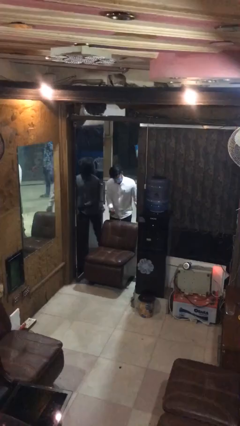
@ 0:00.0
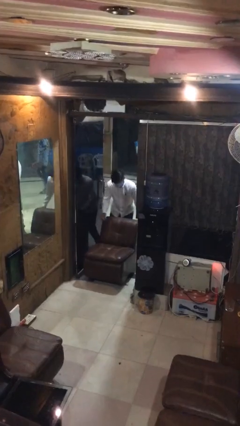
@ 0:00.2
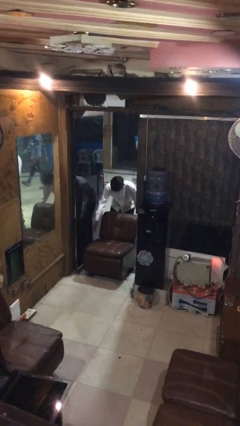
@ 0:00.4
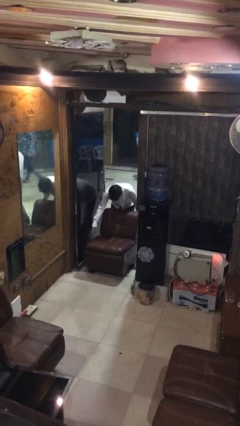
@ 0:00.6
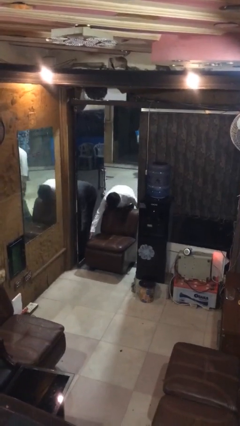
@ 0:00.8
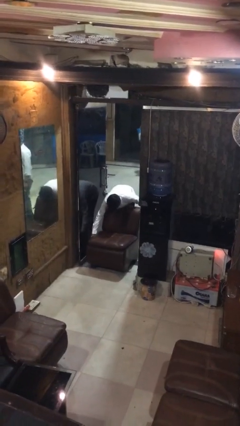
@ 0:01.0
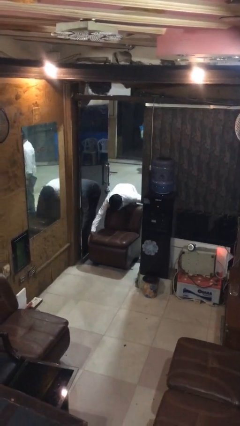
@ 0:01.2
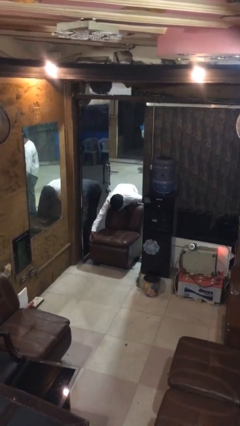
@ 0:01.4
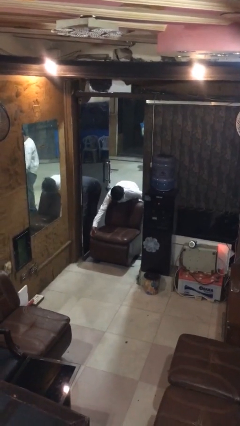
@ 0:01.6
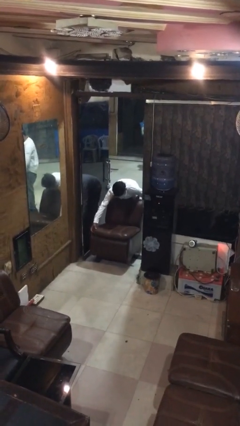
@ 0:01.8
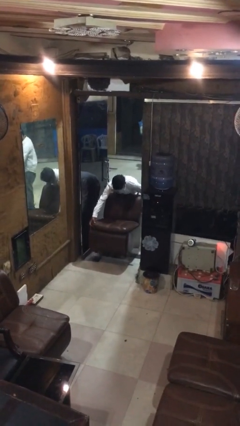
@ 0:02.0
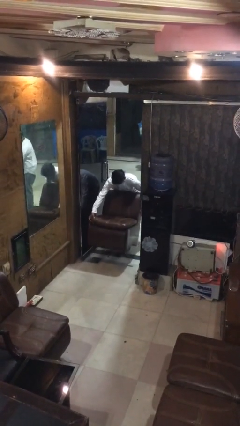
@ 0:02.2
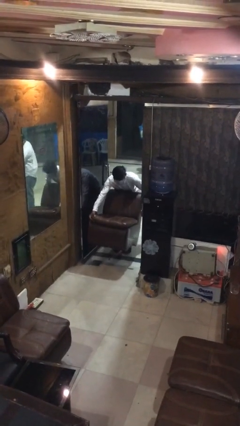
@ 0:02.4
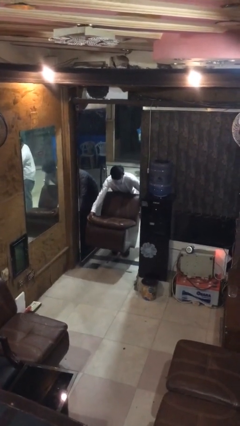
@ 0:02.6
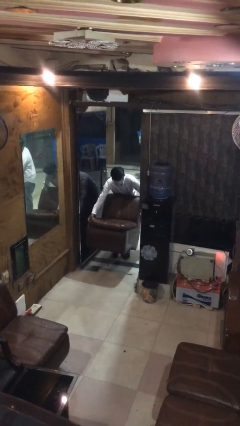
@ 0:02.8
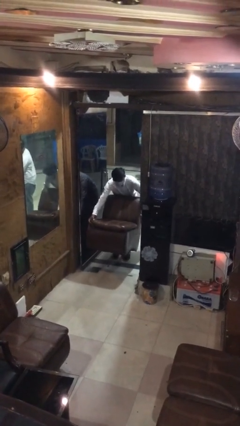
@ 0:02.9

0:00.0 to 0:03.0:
person picks up object from floor

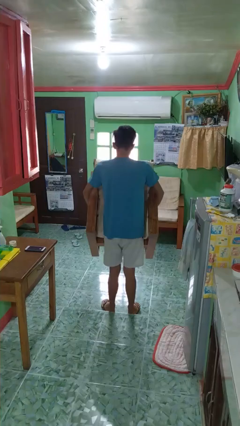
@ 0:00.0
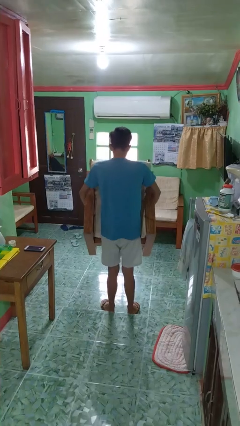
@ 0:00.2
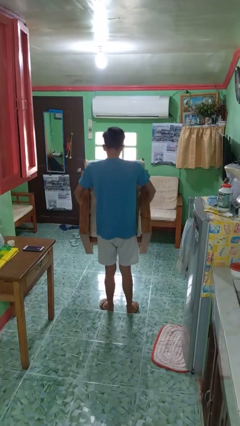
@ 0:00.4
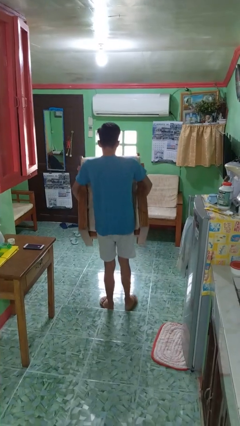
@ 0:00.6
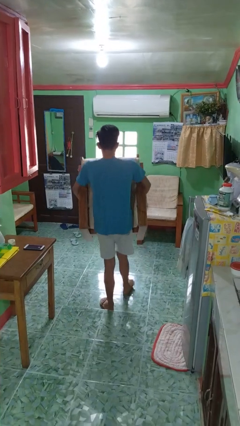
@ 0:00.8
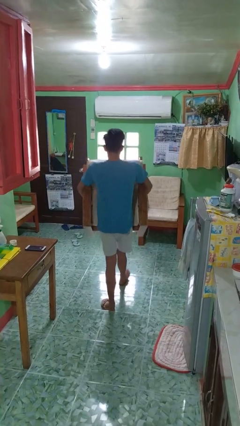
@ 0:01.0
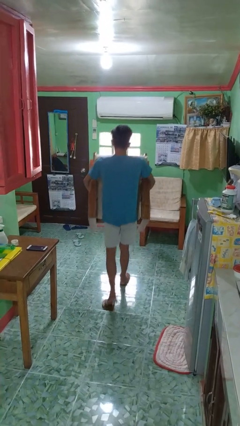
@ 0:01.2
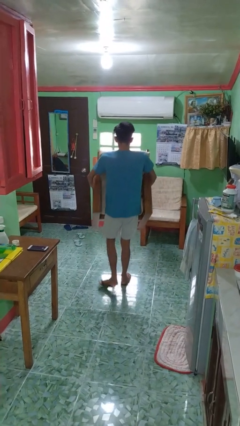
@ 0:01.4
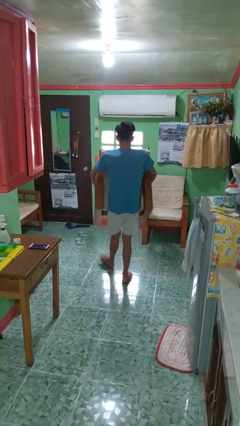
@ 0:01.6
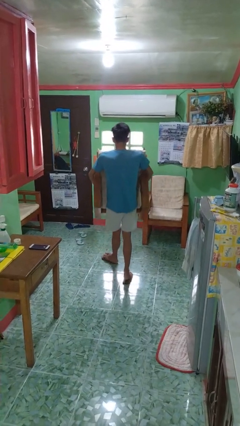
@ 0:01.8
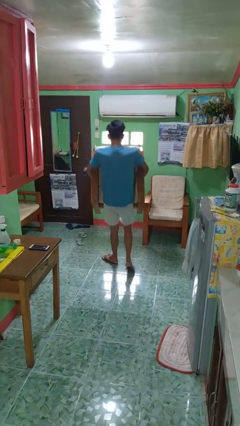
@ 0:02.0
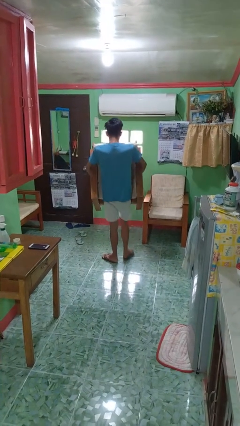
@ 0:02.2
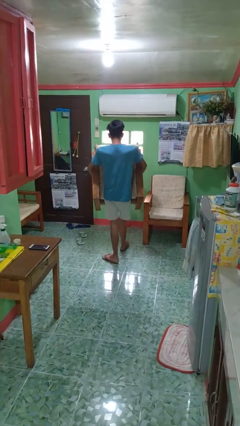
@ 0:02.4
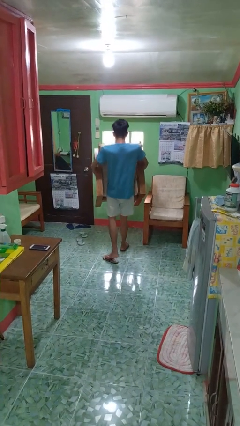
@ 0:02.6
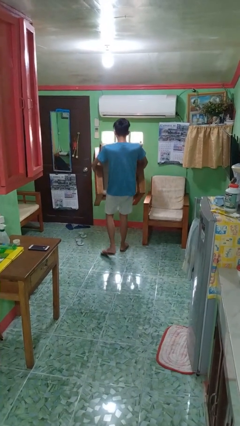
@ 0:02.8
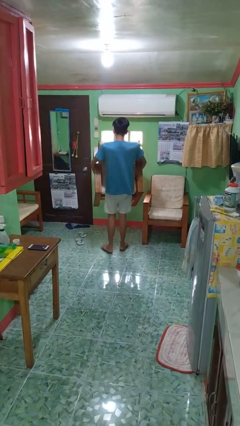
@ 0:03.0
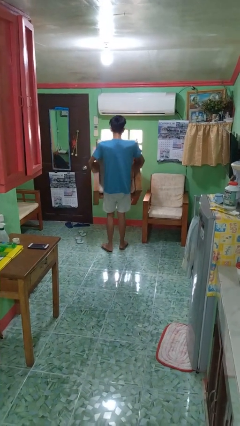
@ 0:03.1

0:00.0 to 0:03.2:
person carries furniture

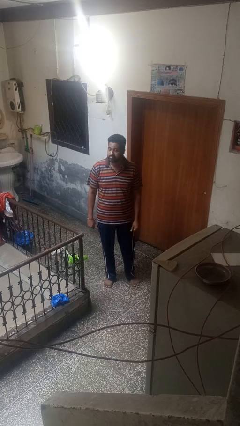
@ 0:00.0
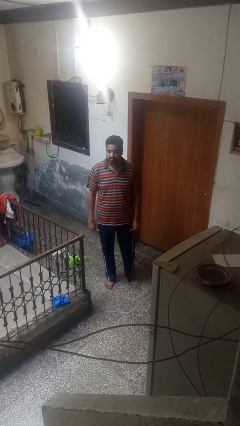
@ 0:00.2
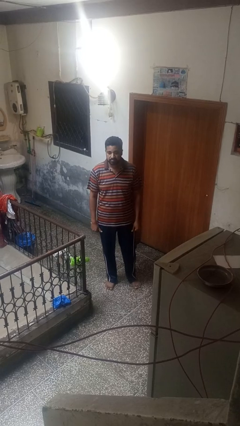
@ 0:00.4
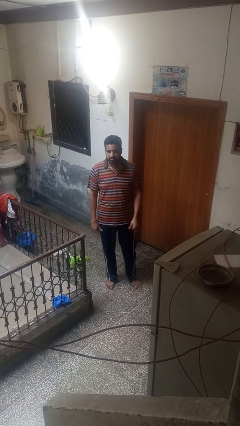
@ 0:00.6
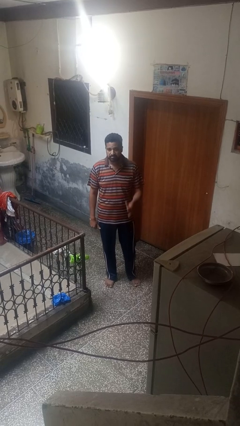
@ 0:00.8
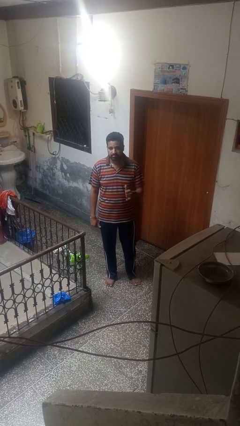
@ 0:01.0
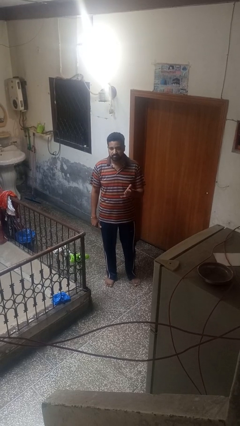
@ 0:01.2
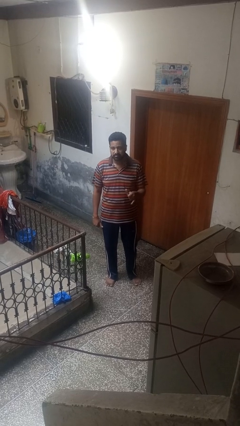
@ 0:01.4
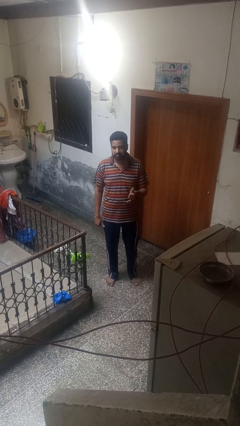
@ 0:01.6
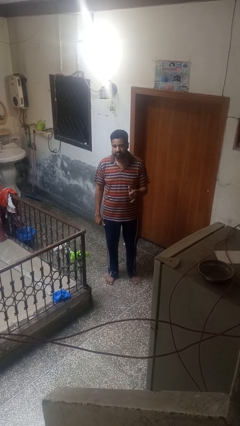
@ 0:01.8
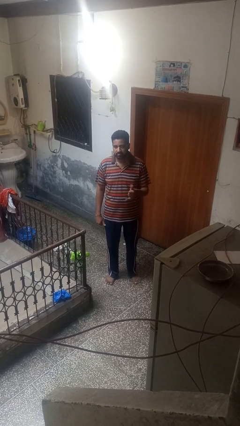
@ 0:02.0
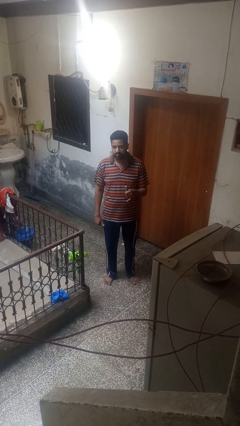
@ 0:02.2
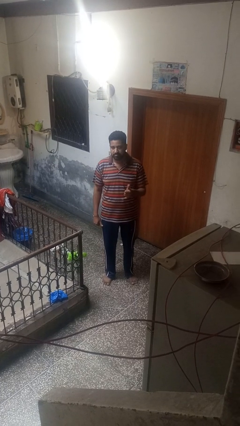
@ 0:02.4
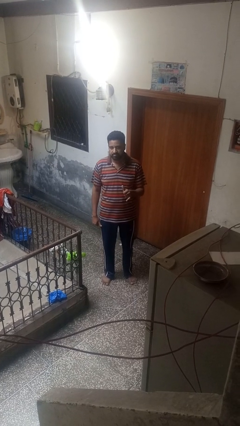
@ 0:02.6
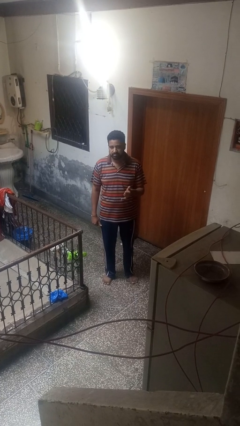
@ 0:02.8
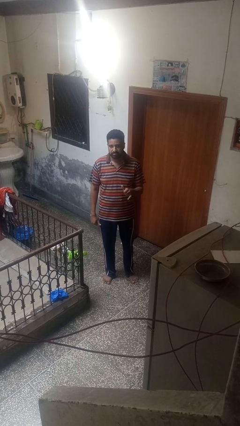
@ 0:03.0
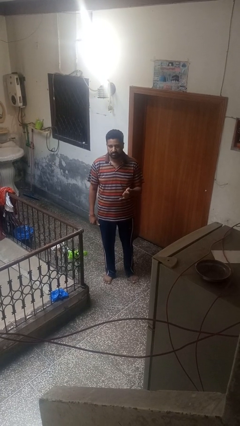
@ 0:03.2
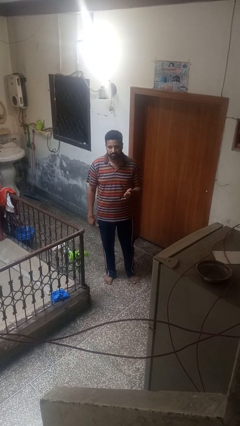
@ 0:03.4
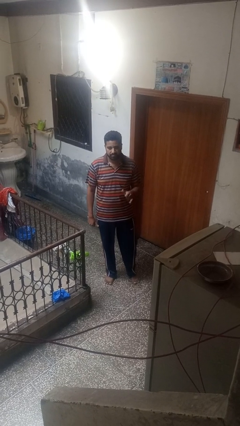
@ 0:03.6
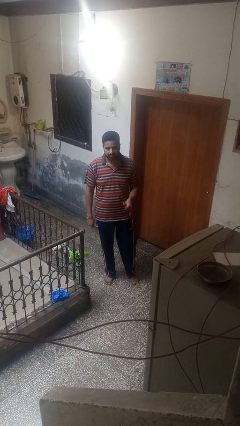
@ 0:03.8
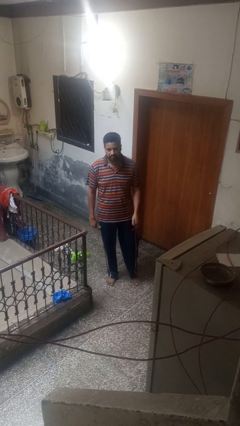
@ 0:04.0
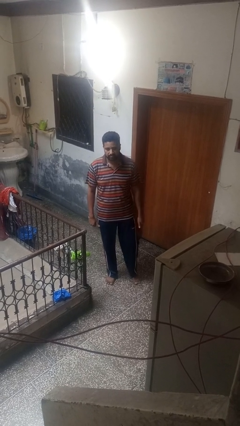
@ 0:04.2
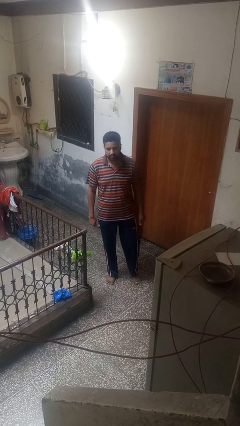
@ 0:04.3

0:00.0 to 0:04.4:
person gestures hang loose

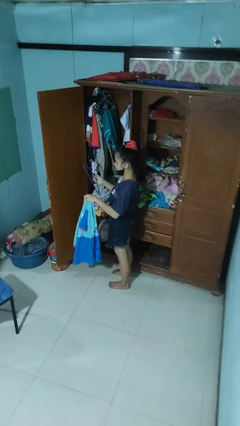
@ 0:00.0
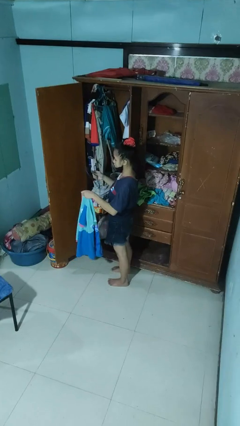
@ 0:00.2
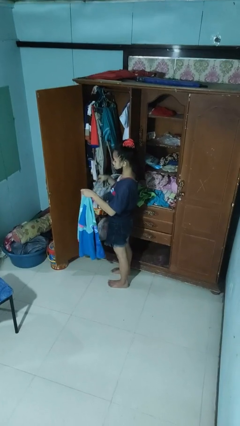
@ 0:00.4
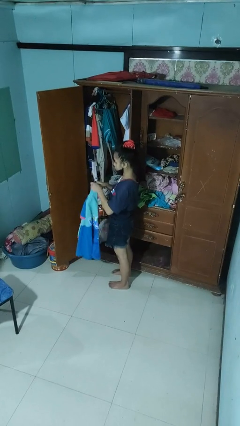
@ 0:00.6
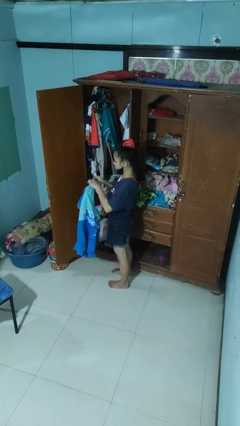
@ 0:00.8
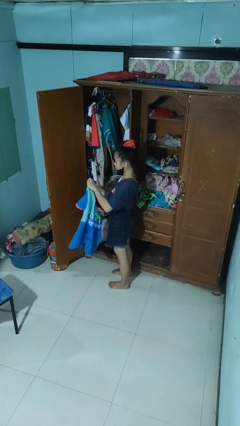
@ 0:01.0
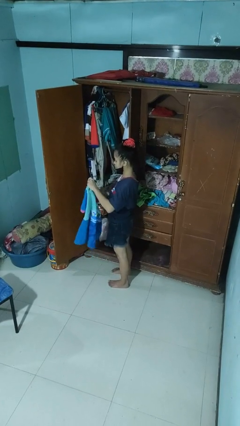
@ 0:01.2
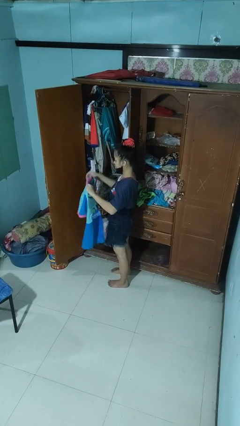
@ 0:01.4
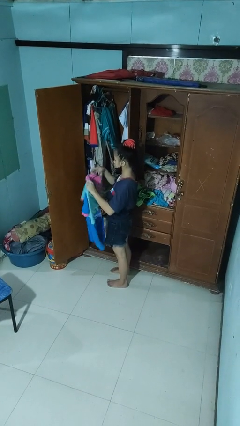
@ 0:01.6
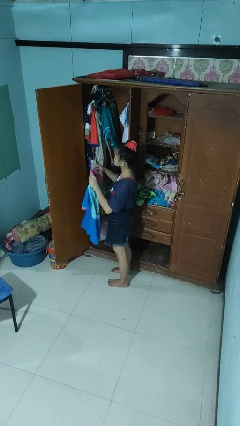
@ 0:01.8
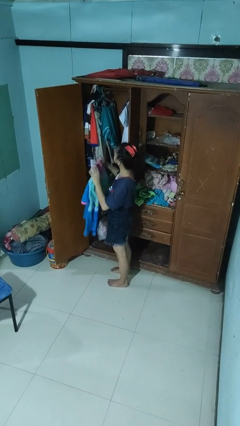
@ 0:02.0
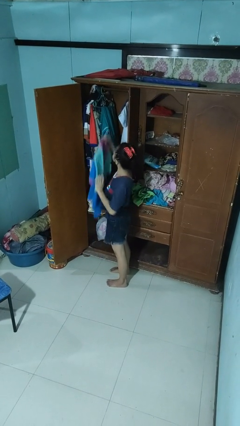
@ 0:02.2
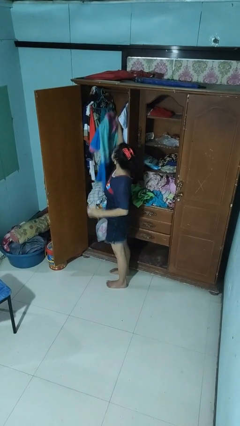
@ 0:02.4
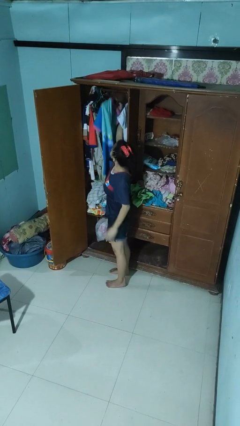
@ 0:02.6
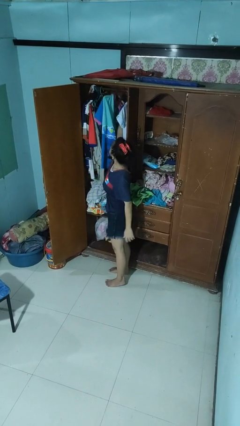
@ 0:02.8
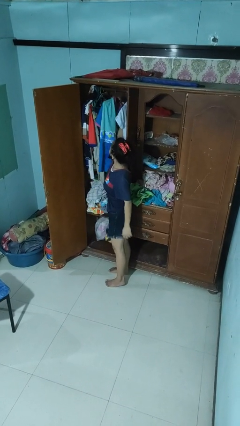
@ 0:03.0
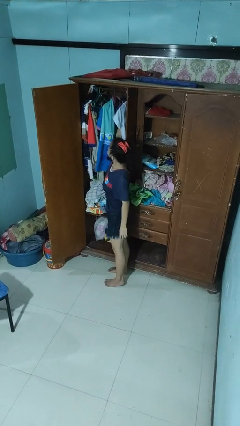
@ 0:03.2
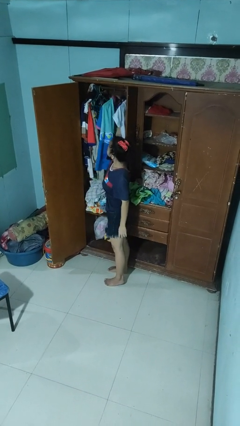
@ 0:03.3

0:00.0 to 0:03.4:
person puts clothes into closet

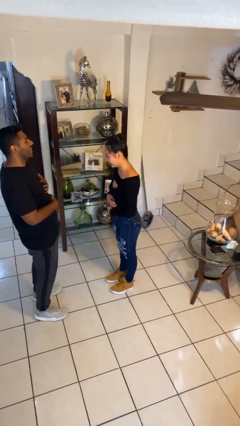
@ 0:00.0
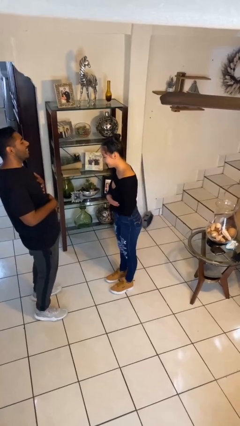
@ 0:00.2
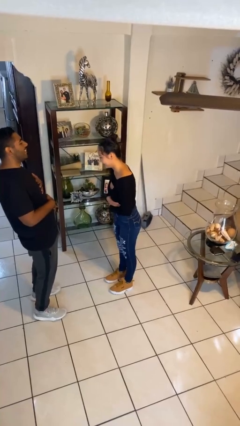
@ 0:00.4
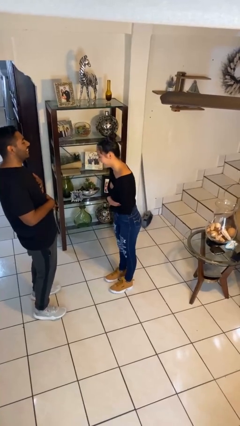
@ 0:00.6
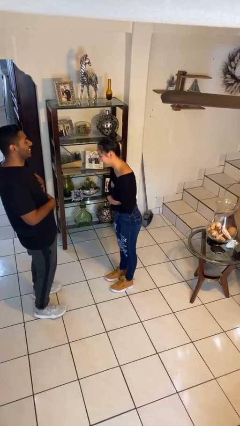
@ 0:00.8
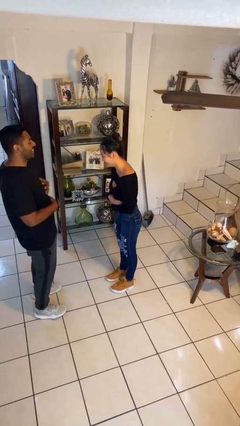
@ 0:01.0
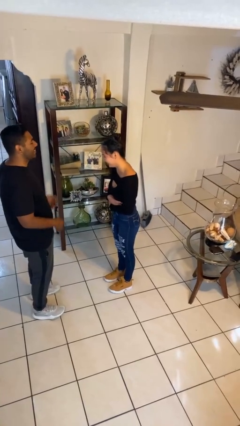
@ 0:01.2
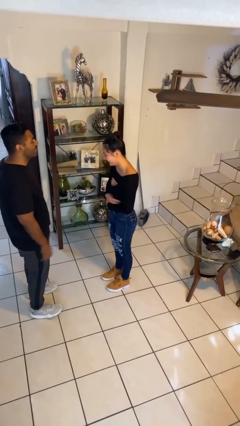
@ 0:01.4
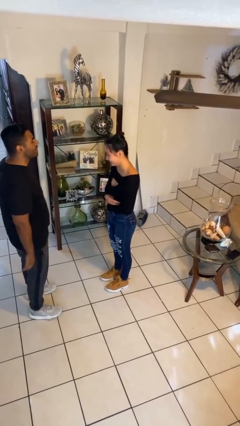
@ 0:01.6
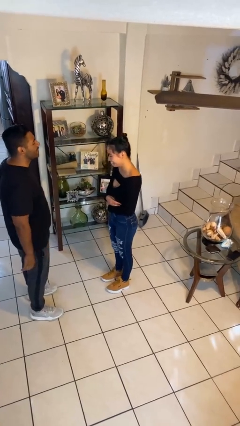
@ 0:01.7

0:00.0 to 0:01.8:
person laughs with person

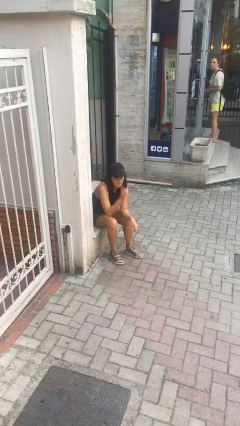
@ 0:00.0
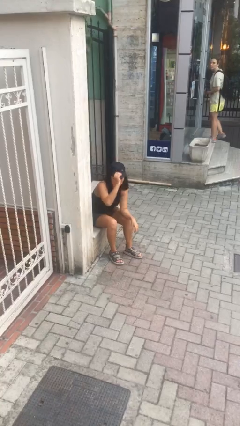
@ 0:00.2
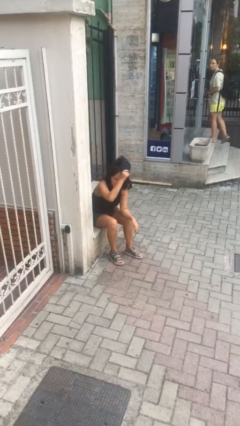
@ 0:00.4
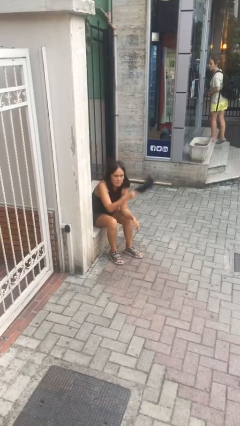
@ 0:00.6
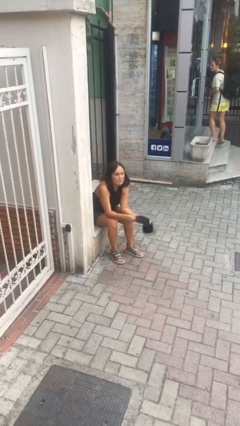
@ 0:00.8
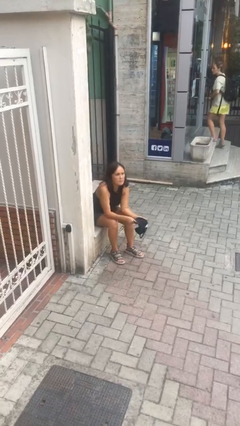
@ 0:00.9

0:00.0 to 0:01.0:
person takes off hat

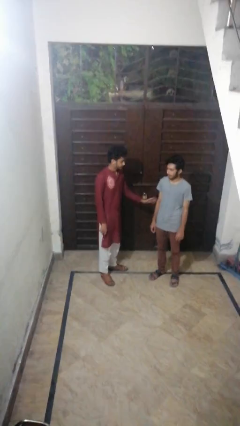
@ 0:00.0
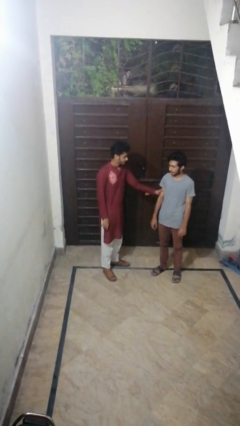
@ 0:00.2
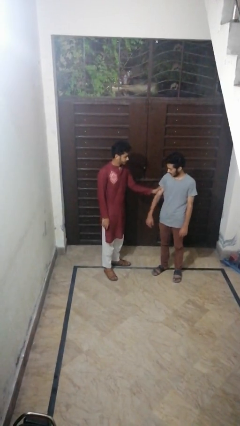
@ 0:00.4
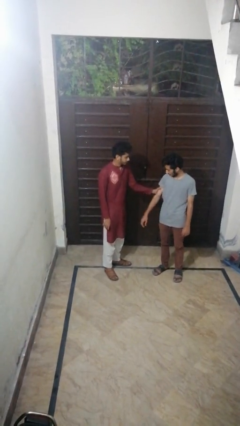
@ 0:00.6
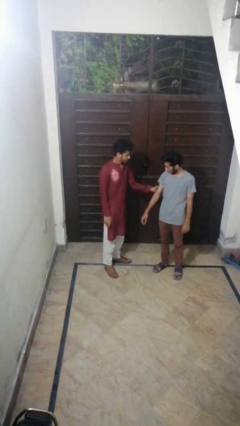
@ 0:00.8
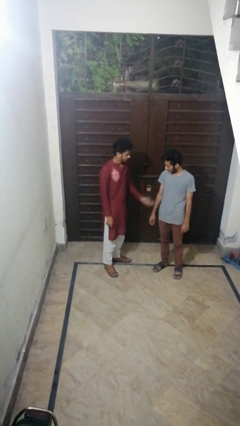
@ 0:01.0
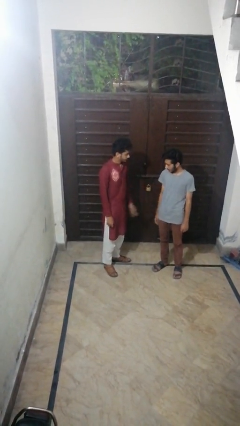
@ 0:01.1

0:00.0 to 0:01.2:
person grabs person by bicep
